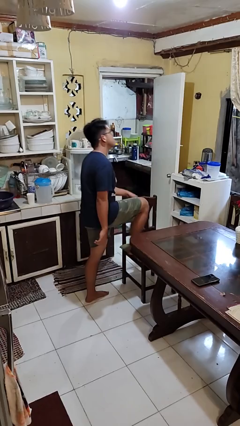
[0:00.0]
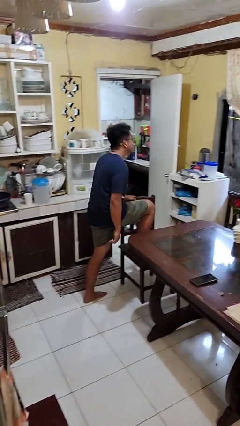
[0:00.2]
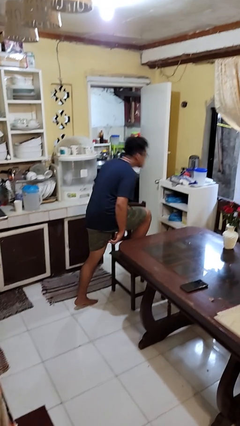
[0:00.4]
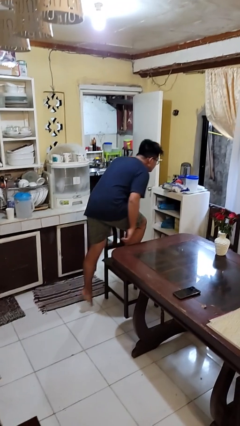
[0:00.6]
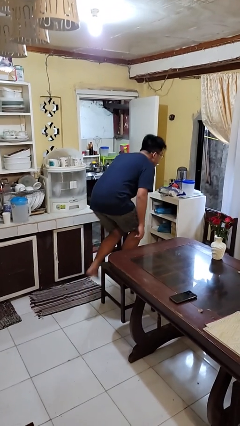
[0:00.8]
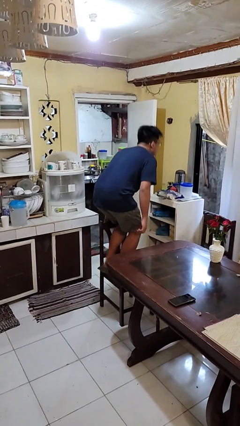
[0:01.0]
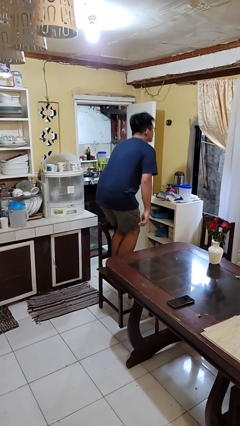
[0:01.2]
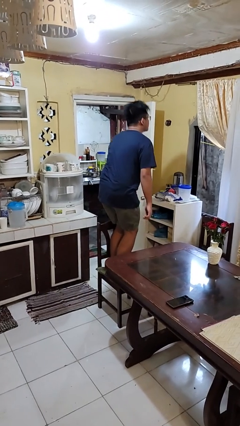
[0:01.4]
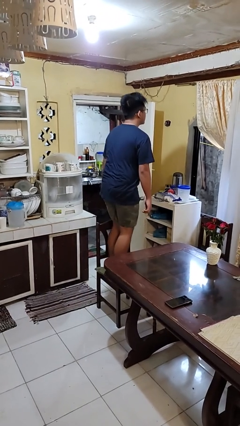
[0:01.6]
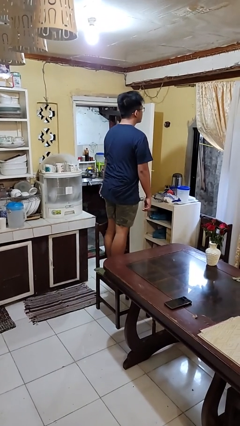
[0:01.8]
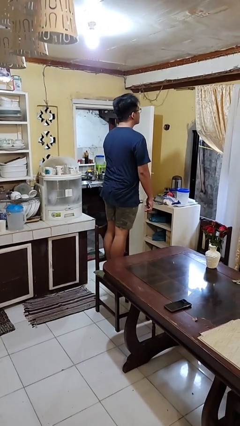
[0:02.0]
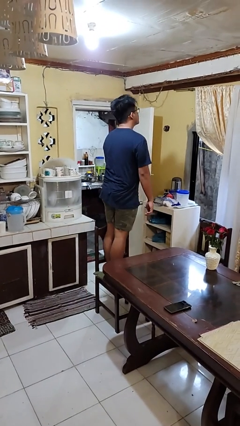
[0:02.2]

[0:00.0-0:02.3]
person climbs on chair

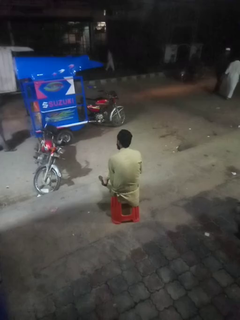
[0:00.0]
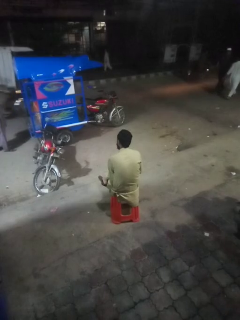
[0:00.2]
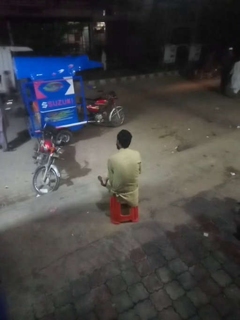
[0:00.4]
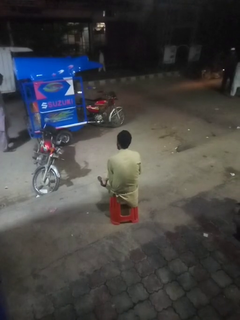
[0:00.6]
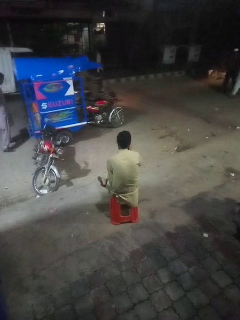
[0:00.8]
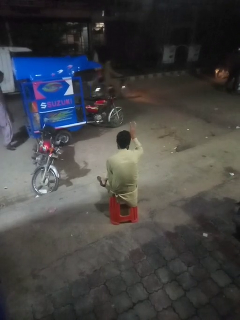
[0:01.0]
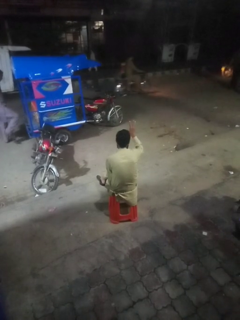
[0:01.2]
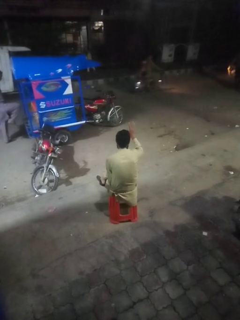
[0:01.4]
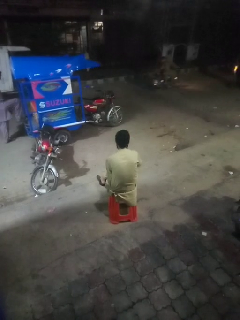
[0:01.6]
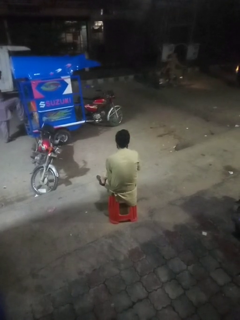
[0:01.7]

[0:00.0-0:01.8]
person gestures number three

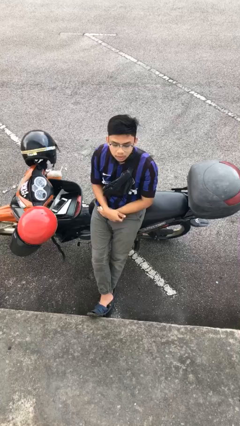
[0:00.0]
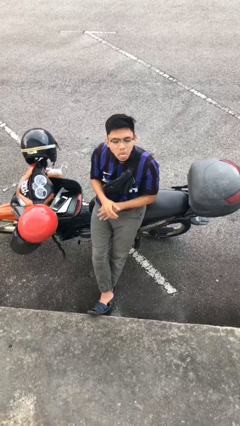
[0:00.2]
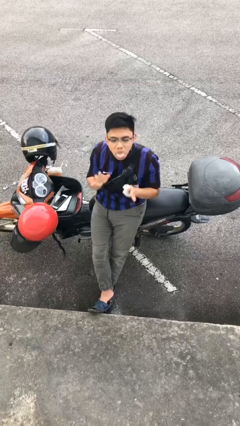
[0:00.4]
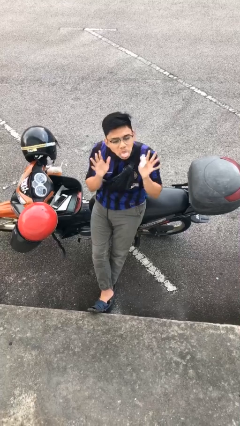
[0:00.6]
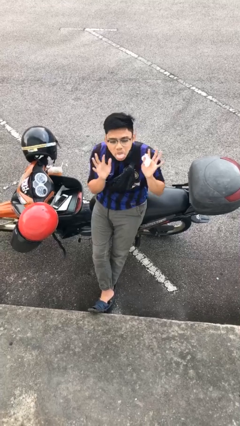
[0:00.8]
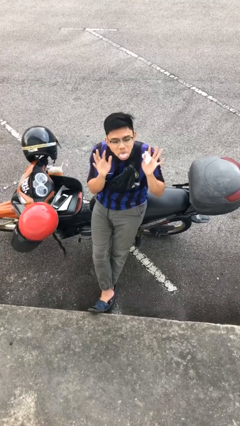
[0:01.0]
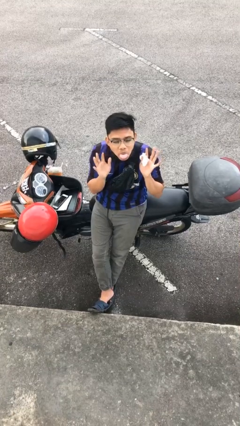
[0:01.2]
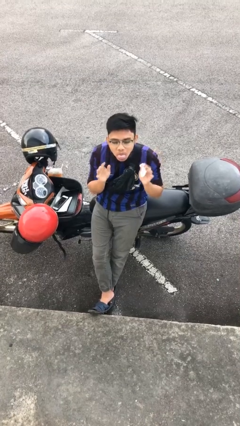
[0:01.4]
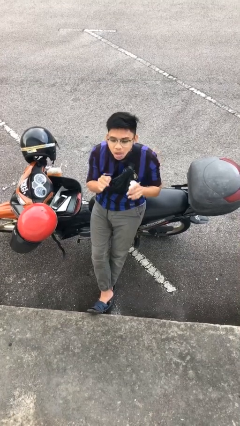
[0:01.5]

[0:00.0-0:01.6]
person sticks out tongue

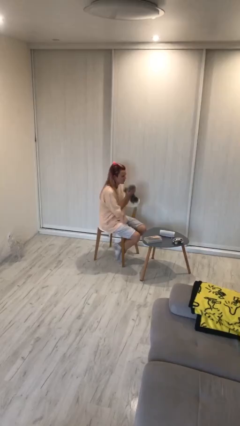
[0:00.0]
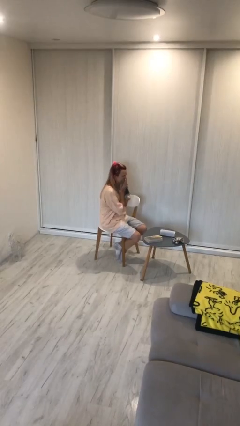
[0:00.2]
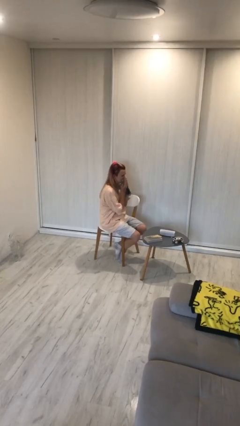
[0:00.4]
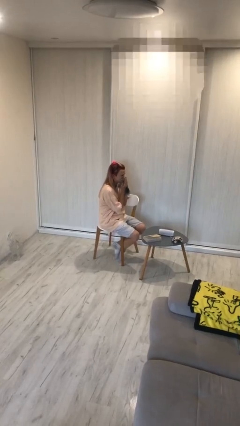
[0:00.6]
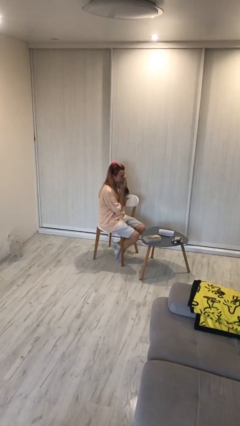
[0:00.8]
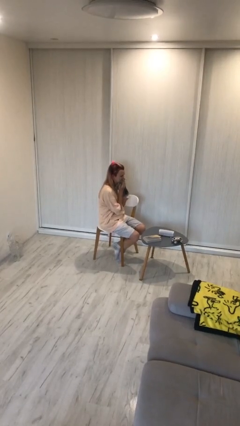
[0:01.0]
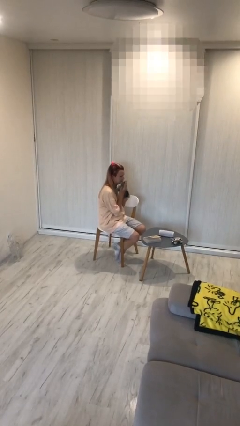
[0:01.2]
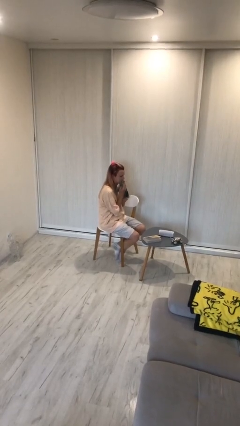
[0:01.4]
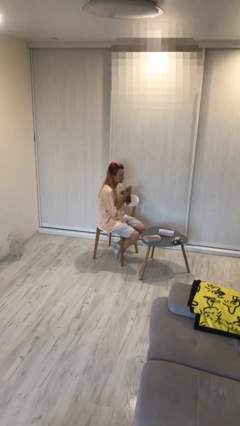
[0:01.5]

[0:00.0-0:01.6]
person wipes mouth with napkin

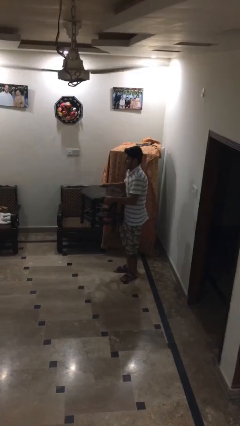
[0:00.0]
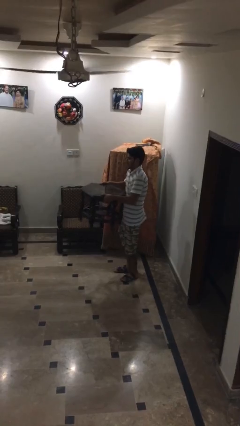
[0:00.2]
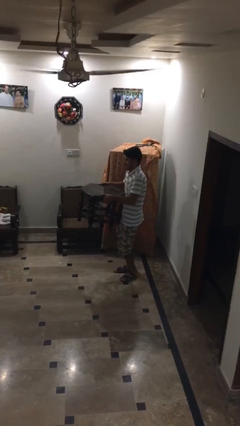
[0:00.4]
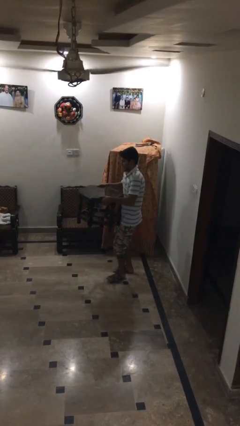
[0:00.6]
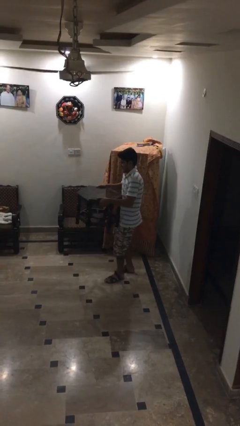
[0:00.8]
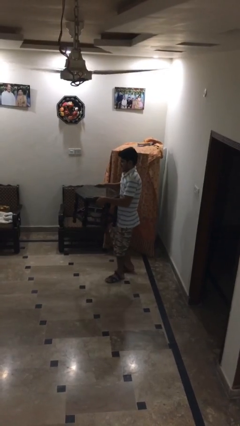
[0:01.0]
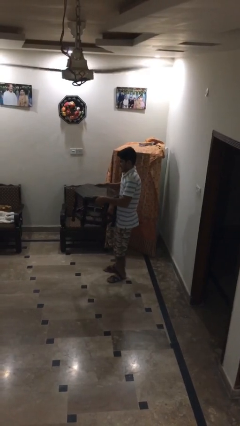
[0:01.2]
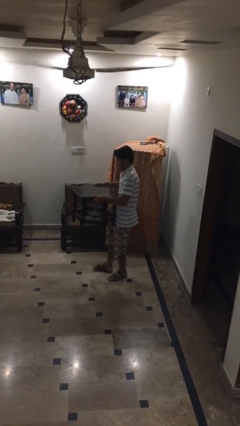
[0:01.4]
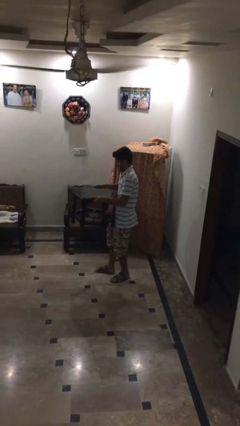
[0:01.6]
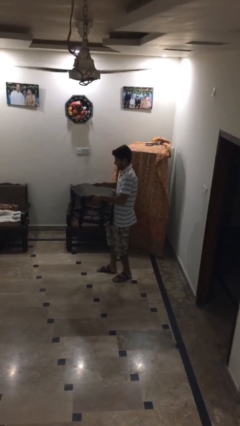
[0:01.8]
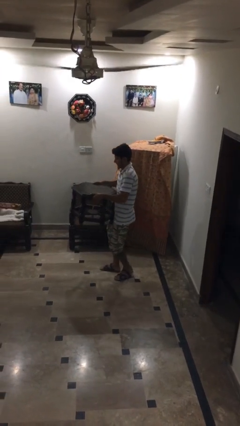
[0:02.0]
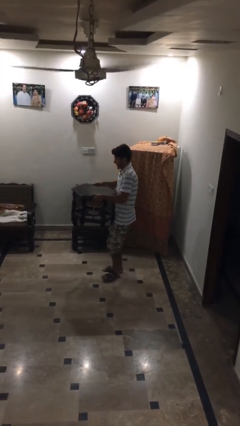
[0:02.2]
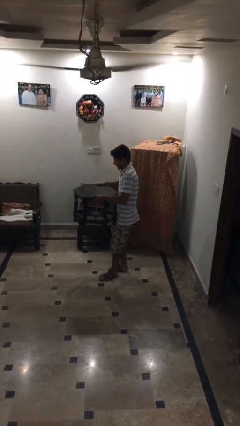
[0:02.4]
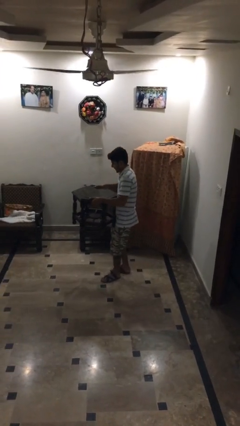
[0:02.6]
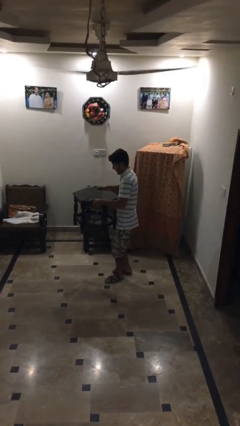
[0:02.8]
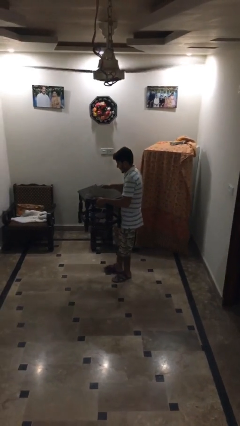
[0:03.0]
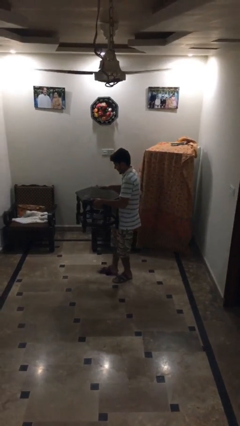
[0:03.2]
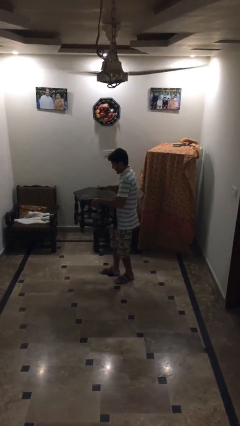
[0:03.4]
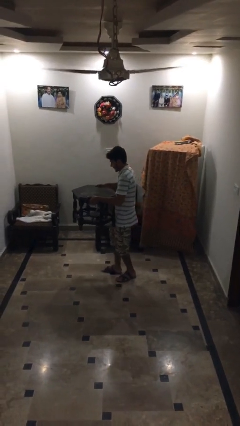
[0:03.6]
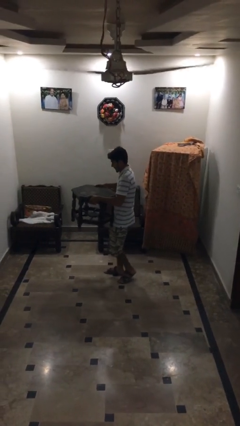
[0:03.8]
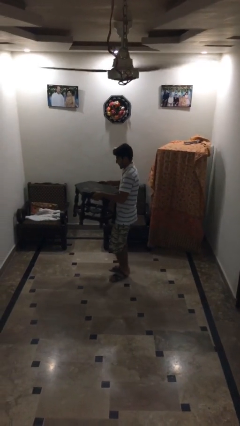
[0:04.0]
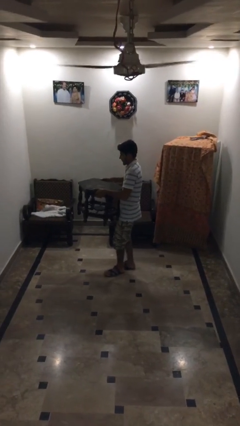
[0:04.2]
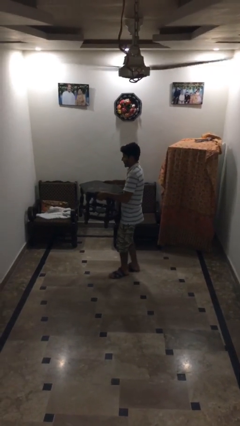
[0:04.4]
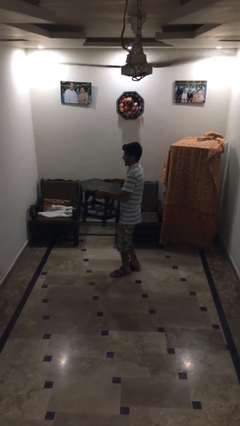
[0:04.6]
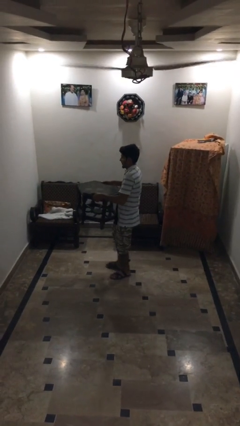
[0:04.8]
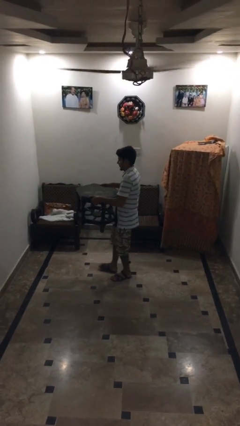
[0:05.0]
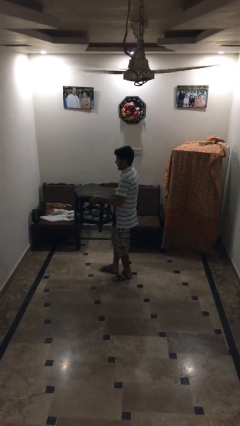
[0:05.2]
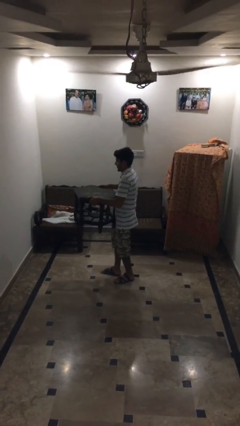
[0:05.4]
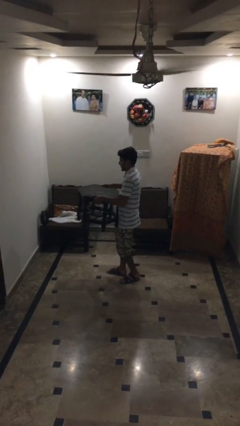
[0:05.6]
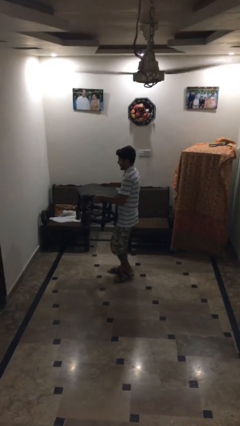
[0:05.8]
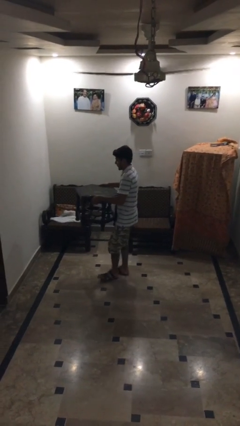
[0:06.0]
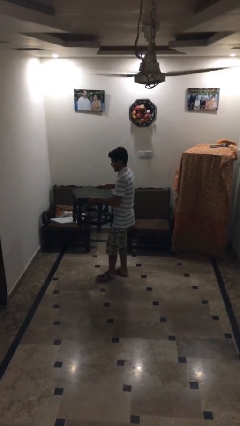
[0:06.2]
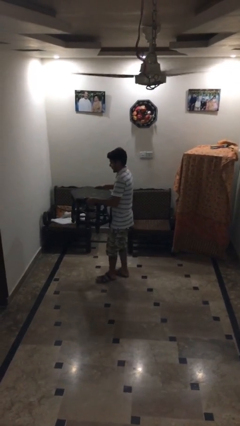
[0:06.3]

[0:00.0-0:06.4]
person carries heavy object

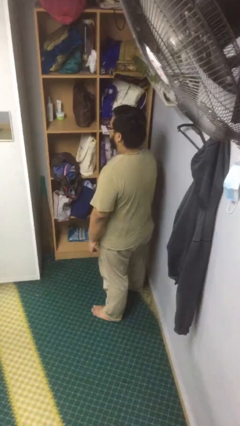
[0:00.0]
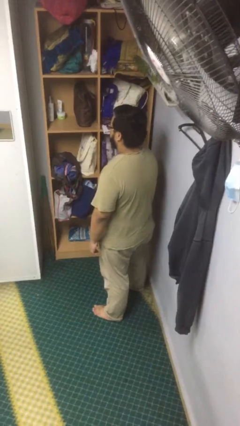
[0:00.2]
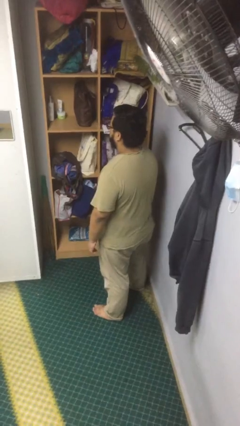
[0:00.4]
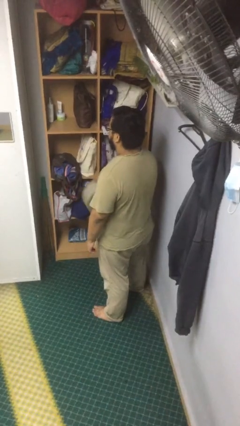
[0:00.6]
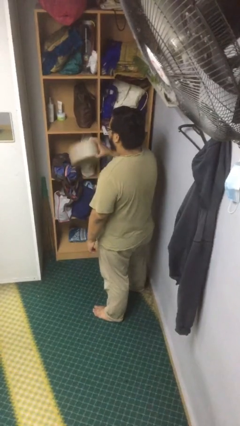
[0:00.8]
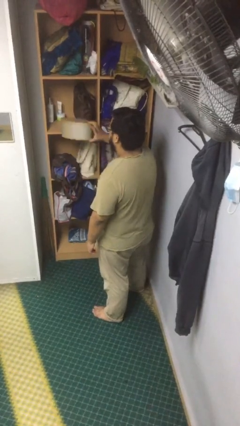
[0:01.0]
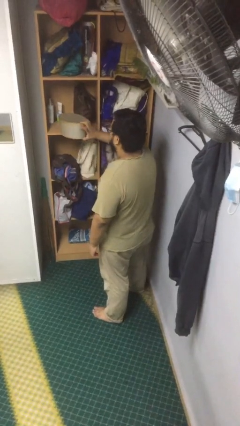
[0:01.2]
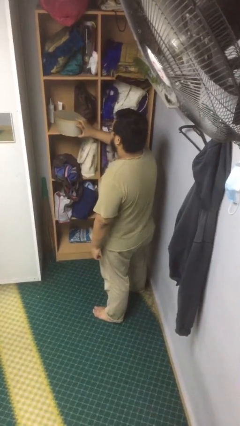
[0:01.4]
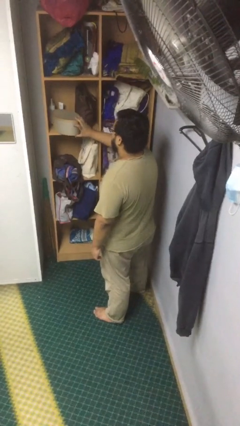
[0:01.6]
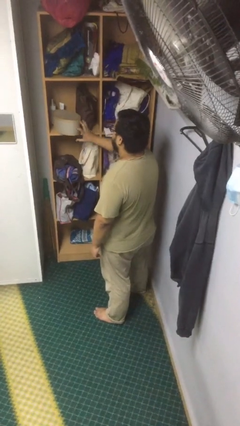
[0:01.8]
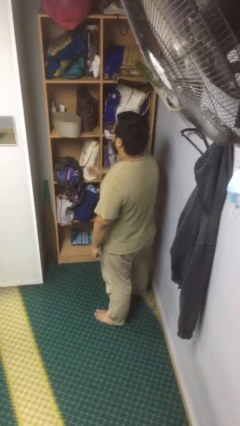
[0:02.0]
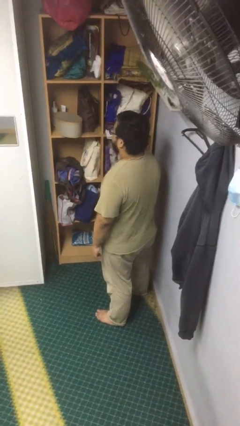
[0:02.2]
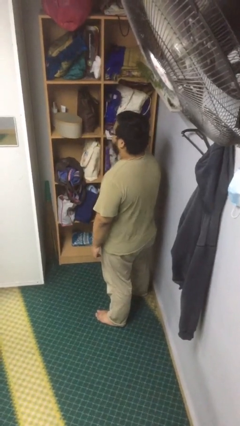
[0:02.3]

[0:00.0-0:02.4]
person puts down object into cabinet

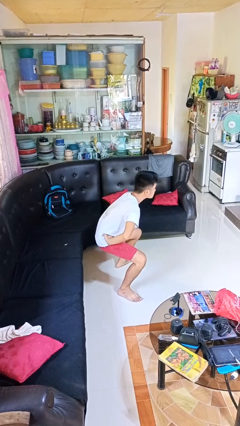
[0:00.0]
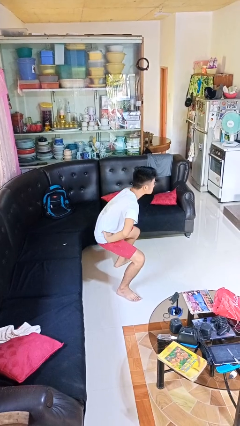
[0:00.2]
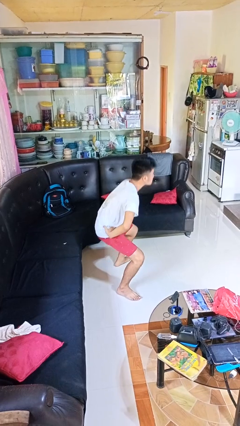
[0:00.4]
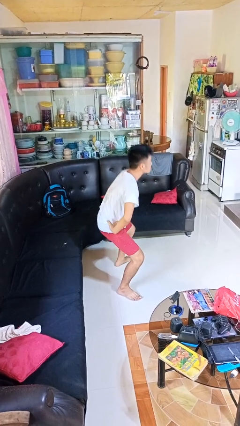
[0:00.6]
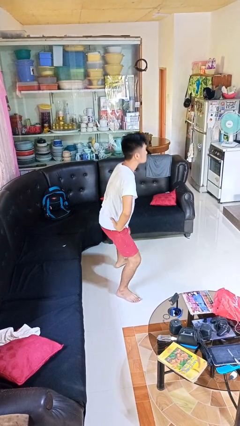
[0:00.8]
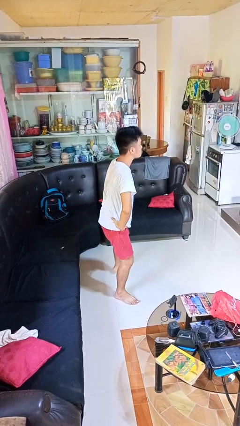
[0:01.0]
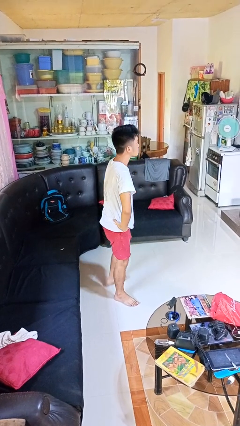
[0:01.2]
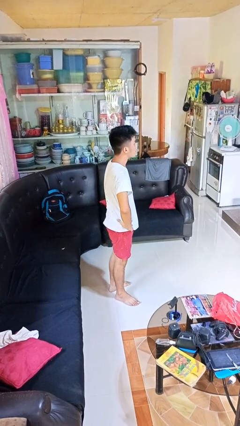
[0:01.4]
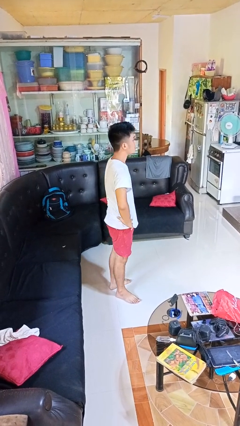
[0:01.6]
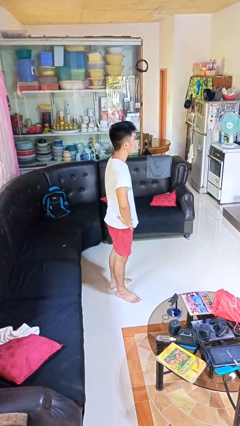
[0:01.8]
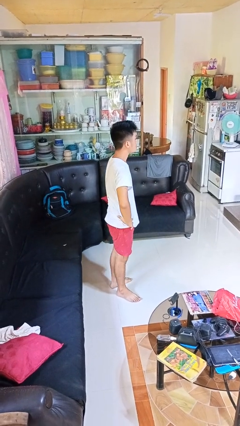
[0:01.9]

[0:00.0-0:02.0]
person stands up
